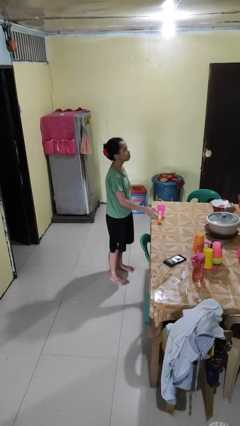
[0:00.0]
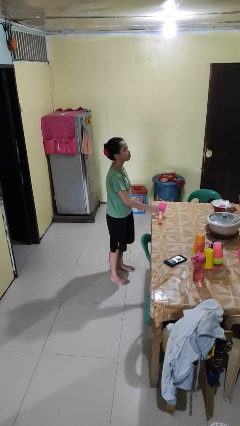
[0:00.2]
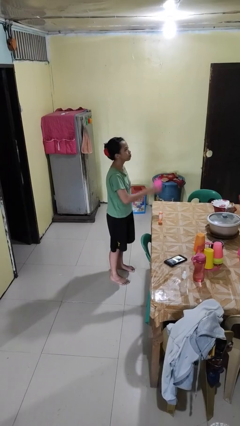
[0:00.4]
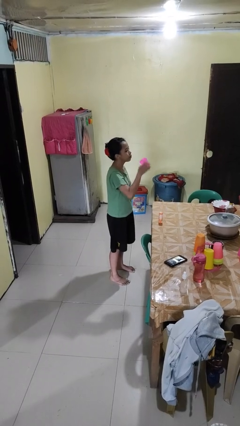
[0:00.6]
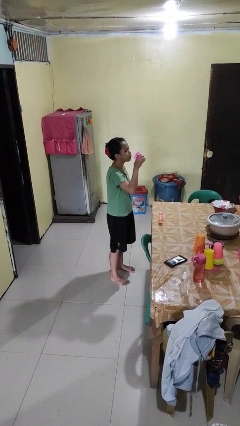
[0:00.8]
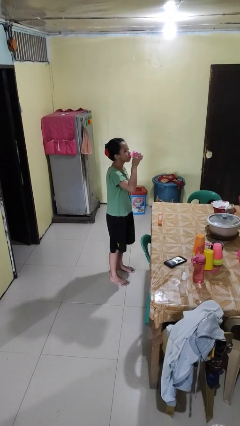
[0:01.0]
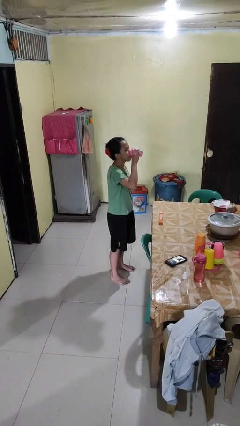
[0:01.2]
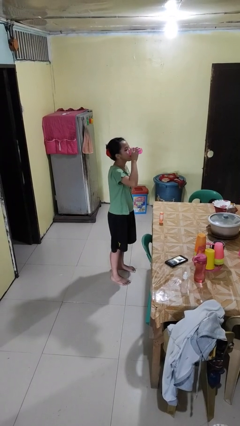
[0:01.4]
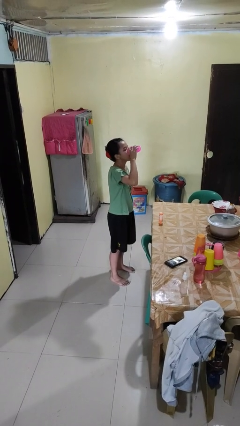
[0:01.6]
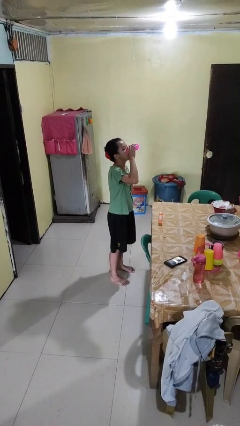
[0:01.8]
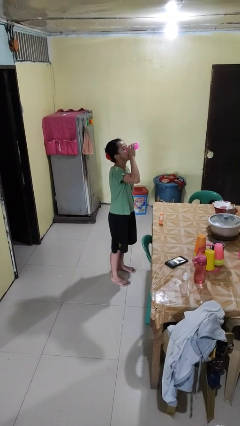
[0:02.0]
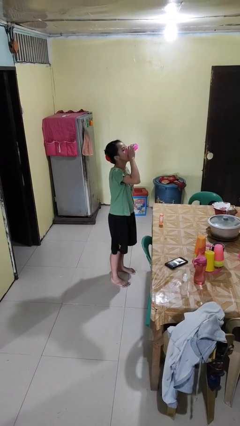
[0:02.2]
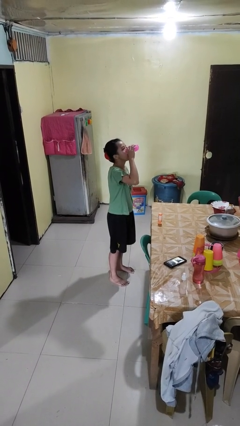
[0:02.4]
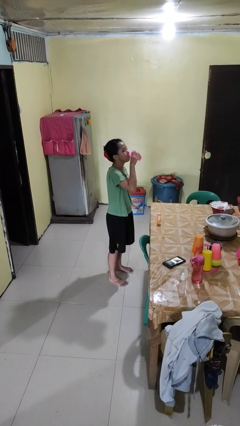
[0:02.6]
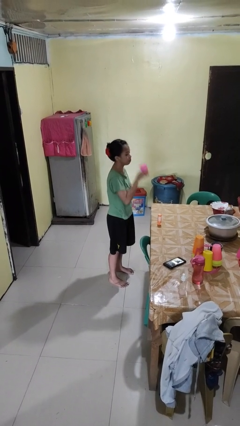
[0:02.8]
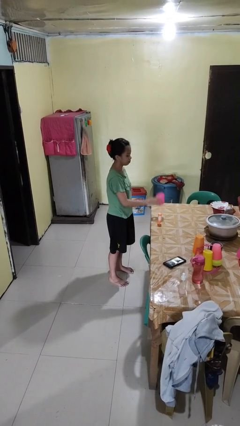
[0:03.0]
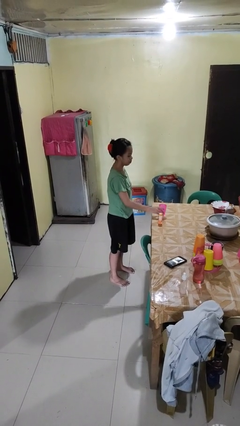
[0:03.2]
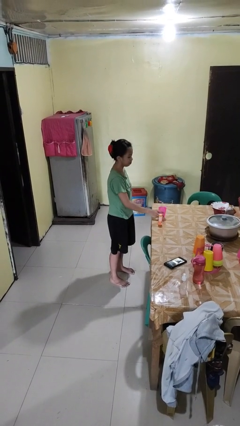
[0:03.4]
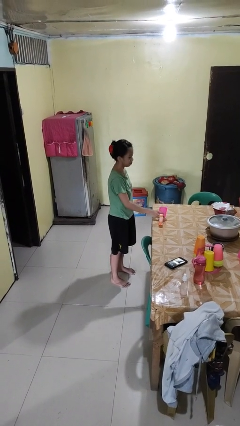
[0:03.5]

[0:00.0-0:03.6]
person drinks from cup

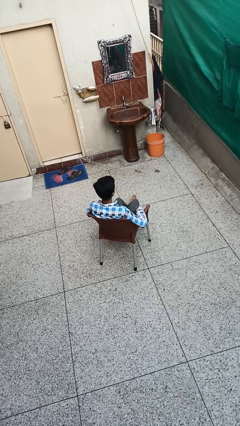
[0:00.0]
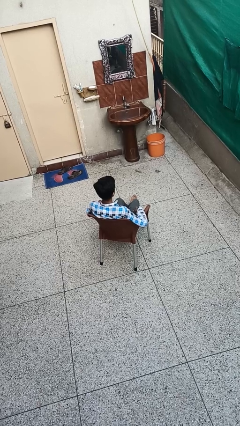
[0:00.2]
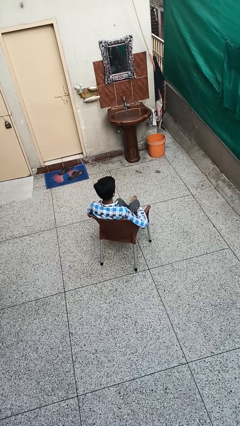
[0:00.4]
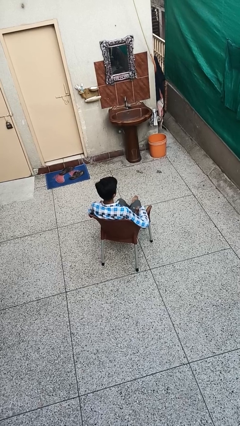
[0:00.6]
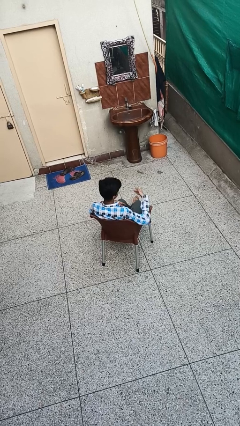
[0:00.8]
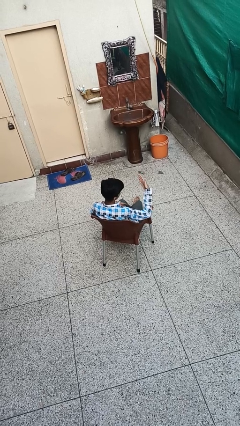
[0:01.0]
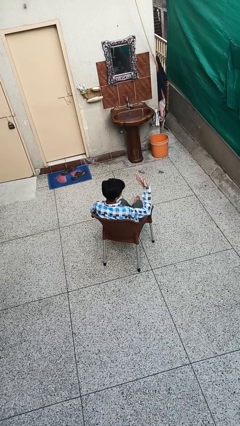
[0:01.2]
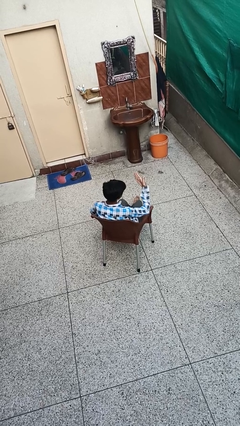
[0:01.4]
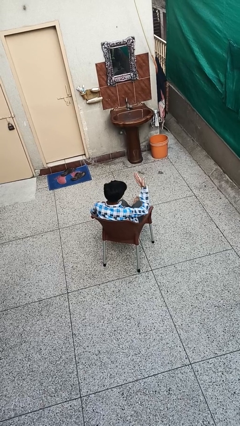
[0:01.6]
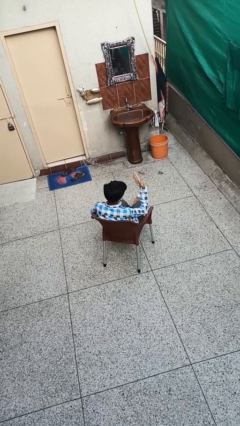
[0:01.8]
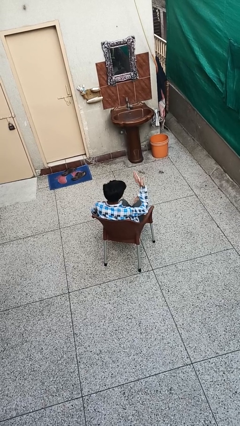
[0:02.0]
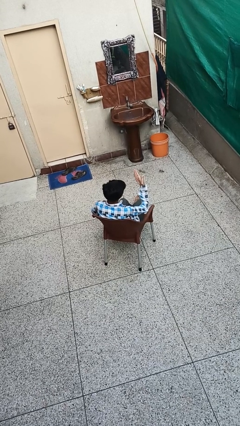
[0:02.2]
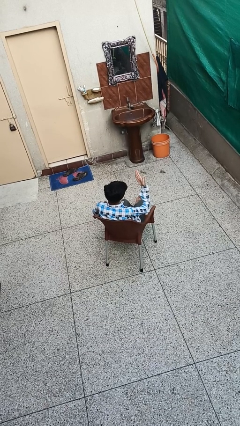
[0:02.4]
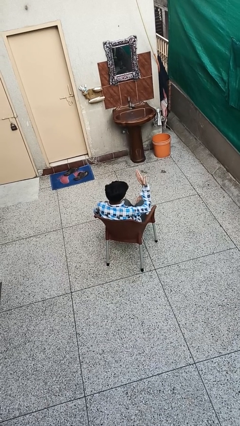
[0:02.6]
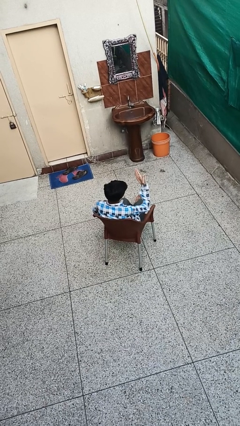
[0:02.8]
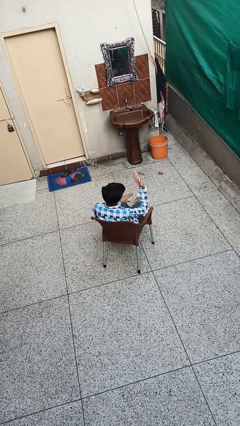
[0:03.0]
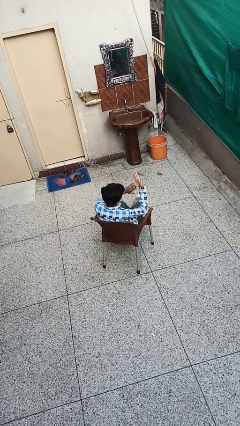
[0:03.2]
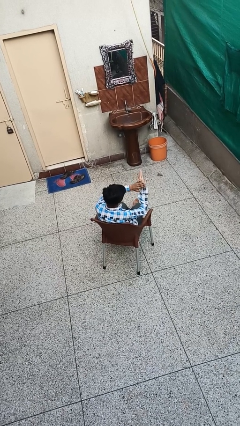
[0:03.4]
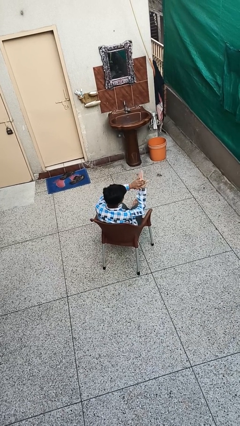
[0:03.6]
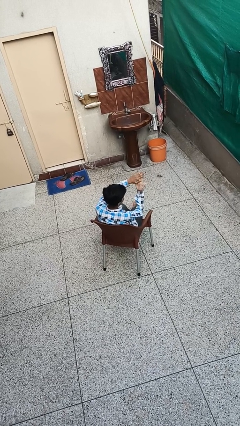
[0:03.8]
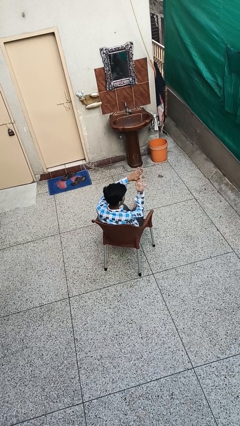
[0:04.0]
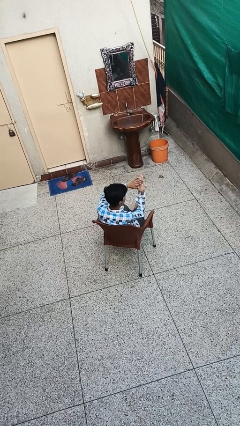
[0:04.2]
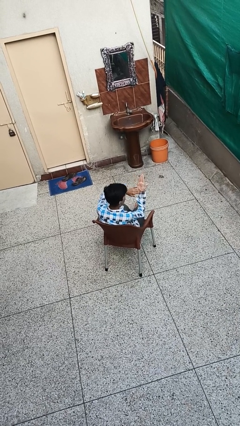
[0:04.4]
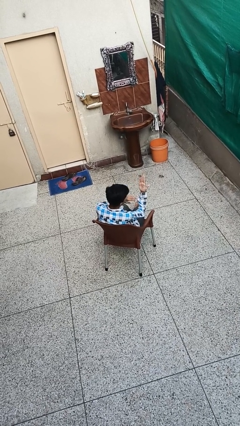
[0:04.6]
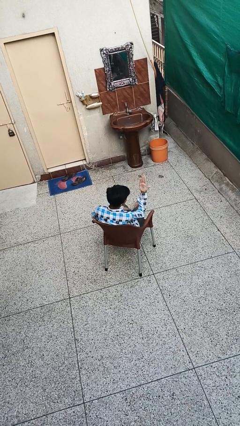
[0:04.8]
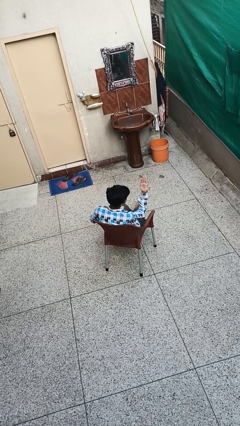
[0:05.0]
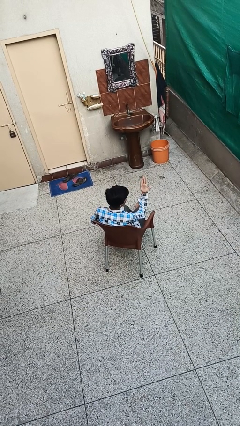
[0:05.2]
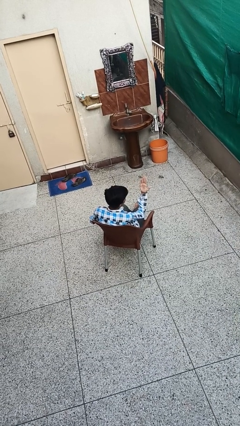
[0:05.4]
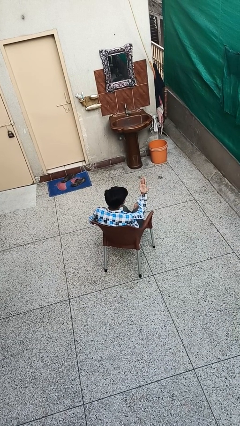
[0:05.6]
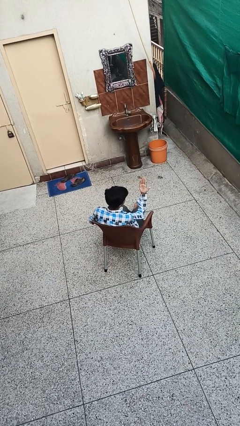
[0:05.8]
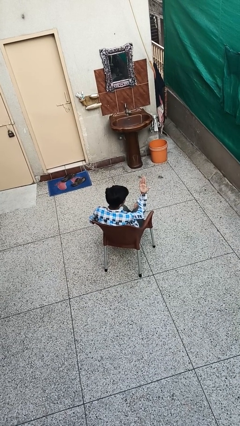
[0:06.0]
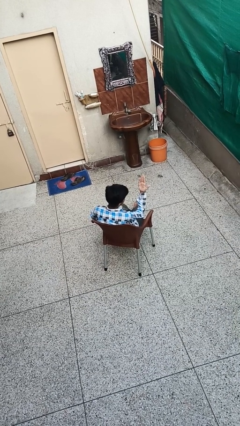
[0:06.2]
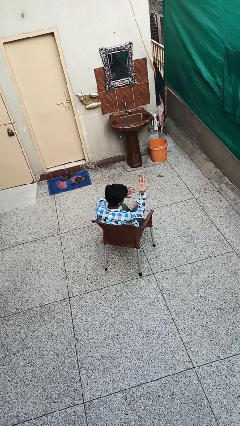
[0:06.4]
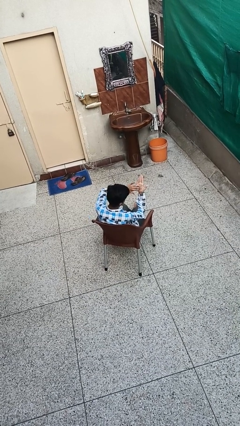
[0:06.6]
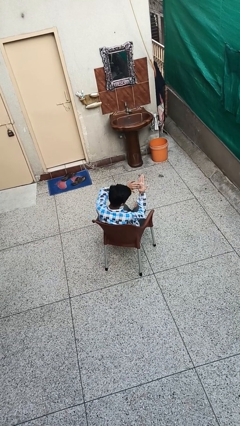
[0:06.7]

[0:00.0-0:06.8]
person looks at hands in lap

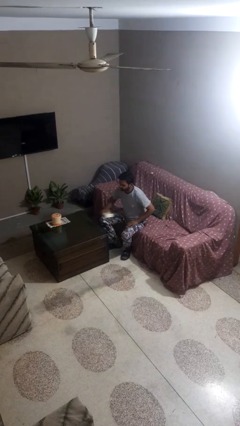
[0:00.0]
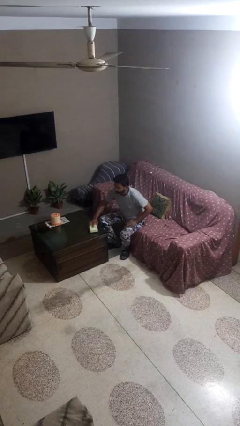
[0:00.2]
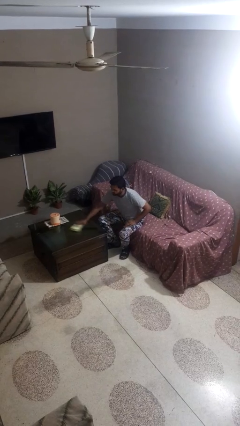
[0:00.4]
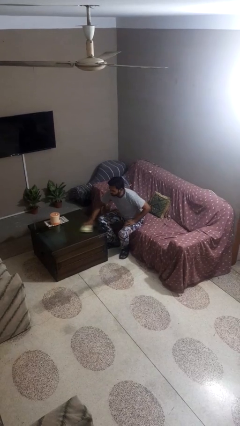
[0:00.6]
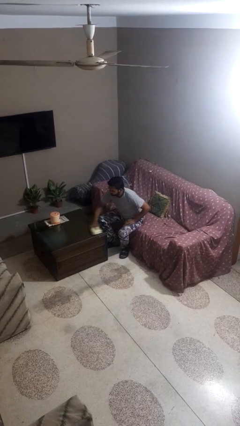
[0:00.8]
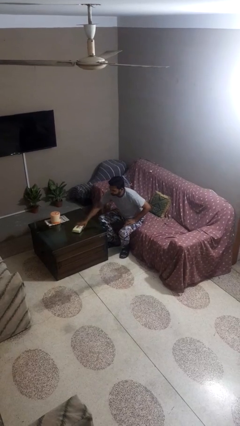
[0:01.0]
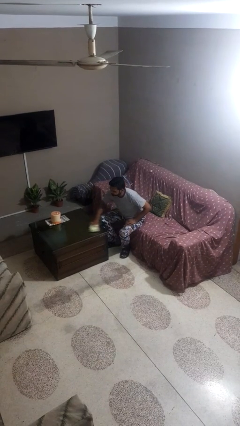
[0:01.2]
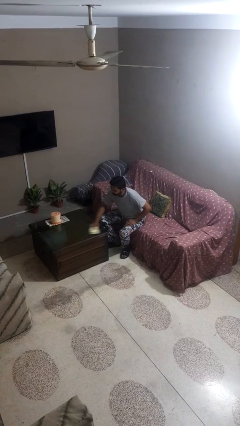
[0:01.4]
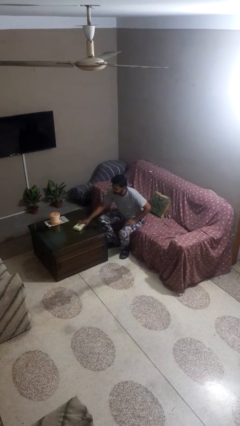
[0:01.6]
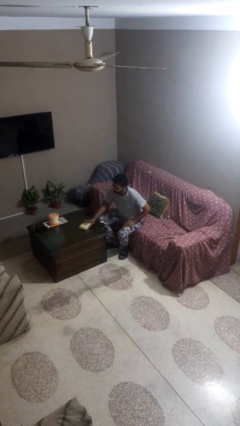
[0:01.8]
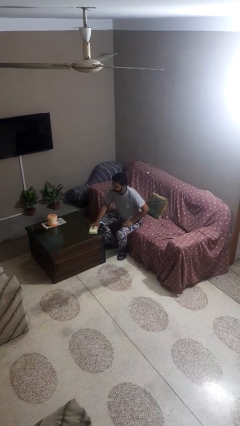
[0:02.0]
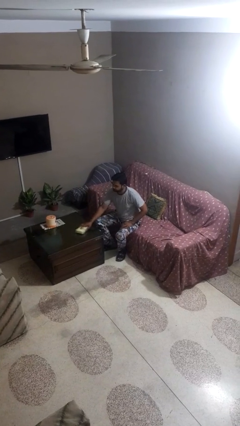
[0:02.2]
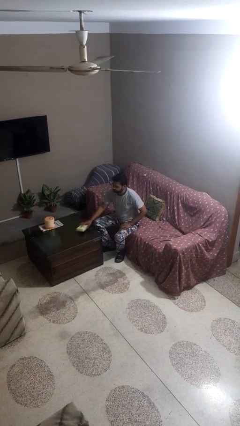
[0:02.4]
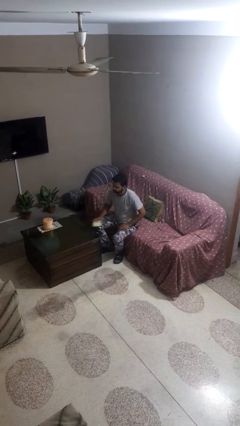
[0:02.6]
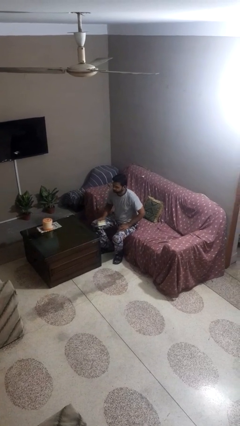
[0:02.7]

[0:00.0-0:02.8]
person dusts furniture

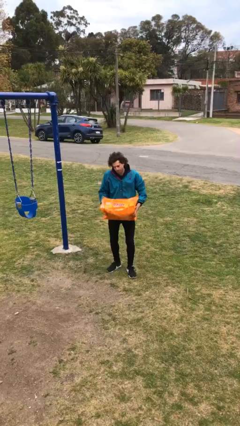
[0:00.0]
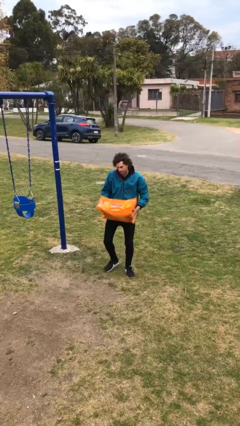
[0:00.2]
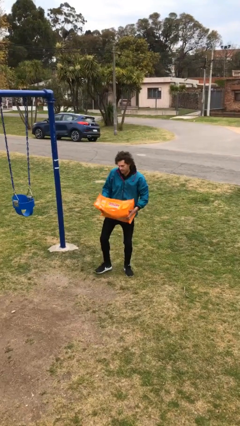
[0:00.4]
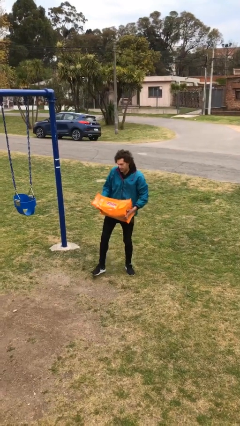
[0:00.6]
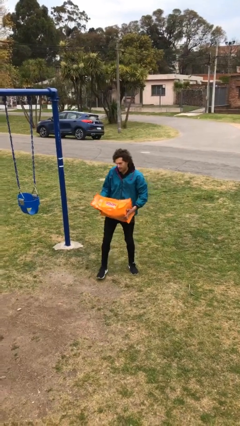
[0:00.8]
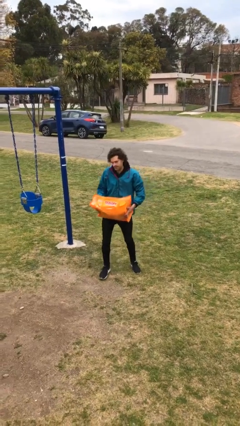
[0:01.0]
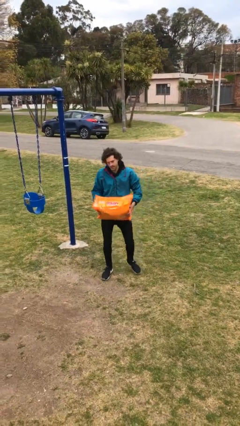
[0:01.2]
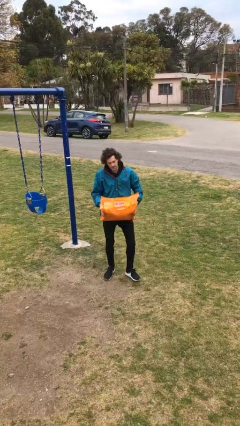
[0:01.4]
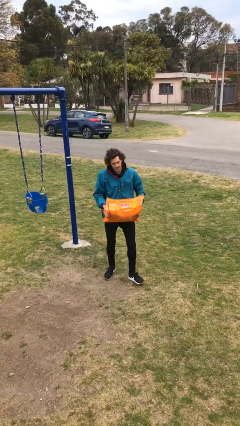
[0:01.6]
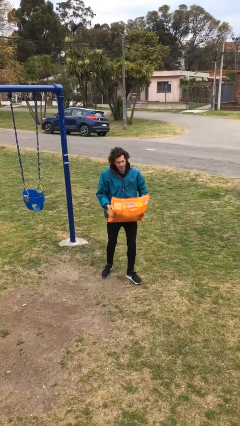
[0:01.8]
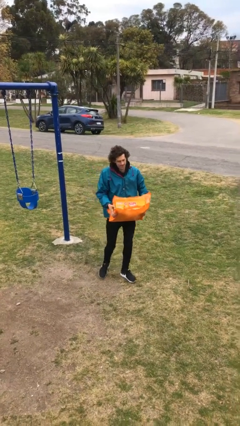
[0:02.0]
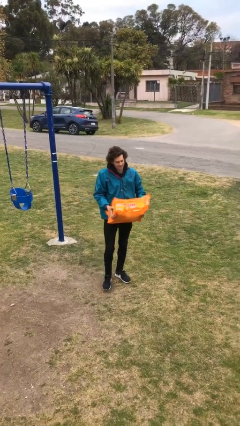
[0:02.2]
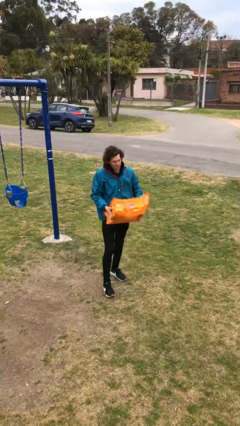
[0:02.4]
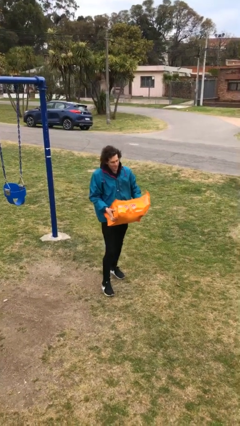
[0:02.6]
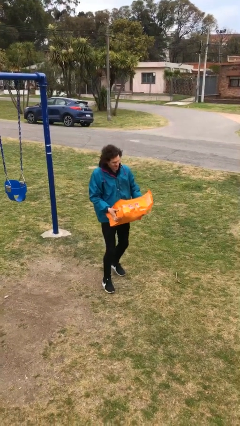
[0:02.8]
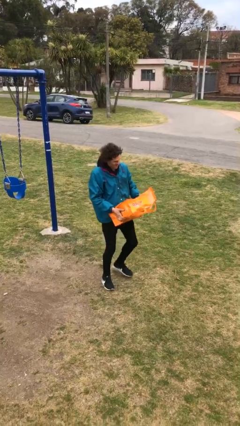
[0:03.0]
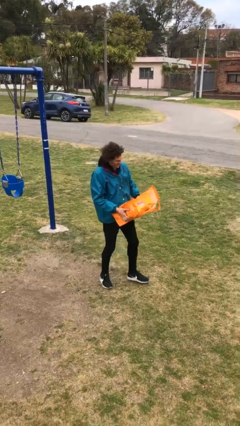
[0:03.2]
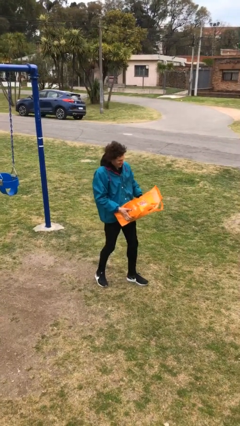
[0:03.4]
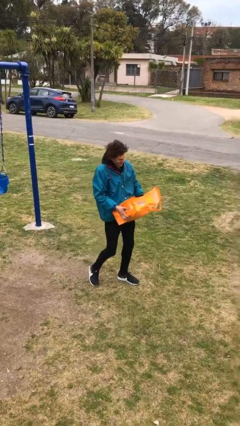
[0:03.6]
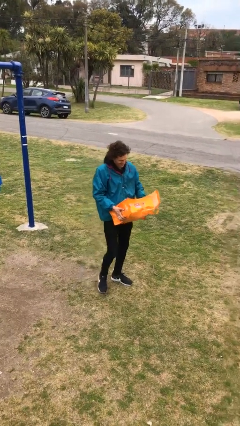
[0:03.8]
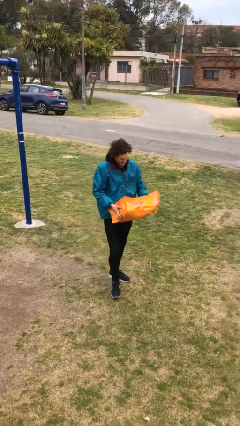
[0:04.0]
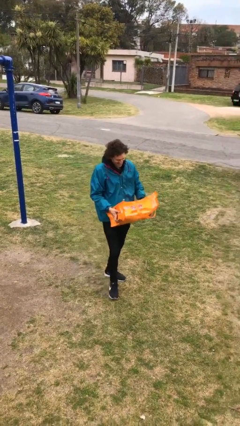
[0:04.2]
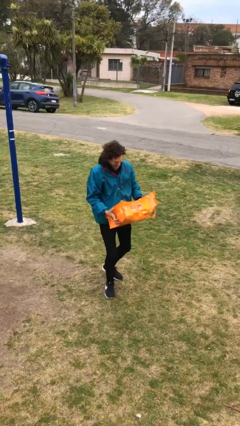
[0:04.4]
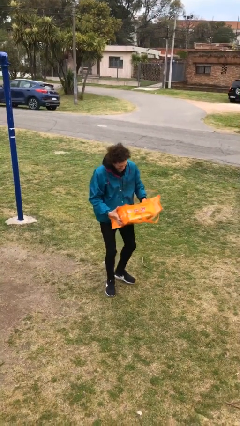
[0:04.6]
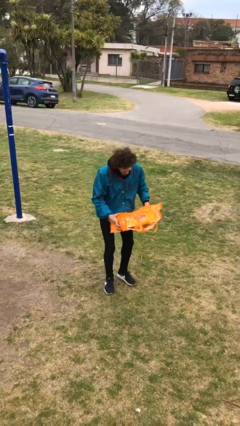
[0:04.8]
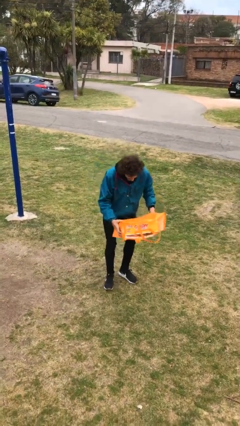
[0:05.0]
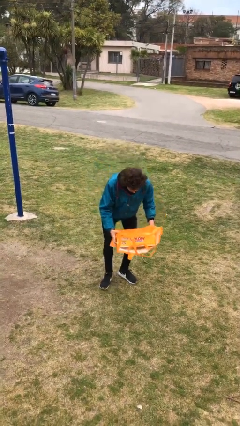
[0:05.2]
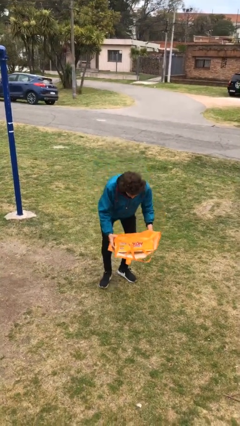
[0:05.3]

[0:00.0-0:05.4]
person carries heavy object
